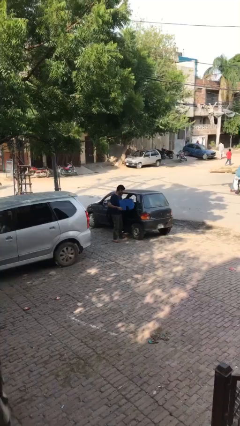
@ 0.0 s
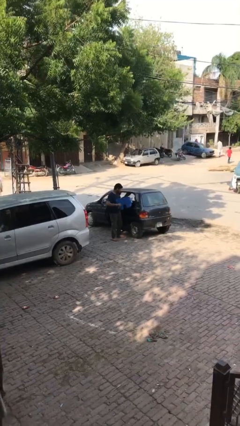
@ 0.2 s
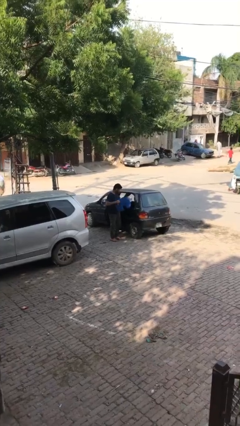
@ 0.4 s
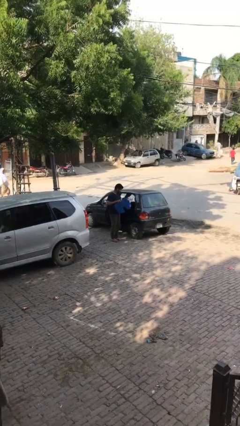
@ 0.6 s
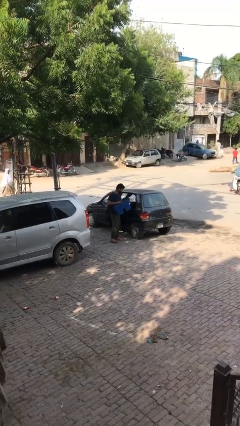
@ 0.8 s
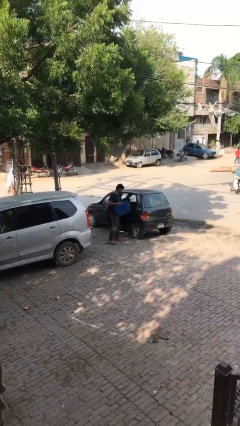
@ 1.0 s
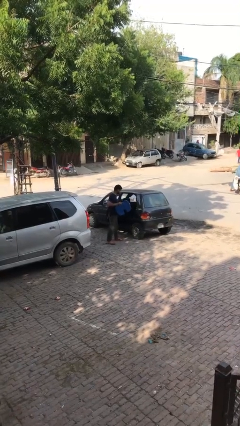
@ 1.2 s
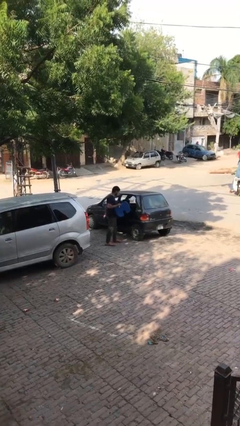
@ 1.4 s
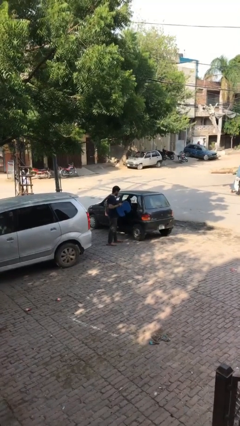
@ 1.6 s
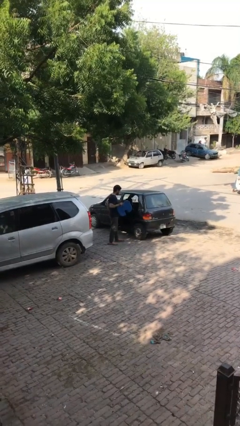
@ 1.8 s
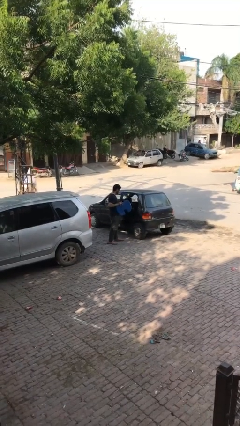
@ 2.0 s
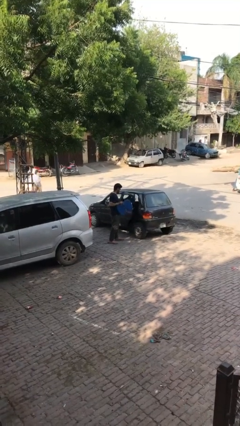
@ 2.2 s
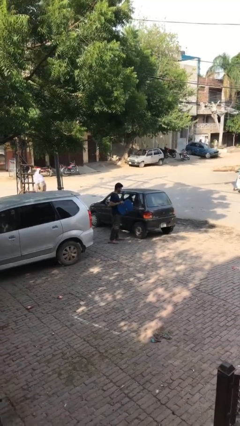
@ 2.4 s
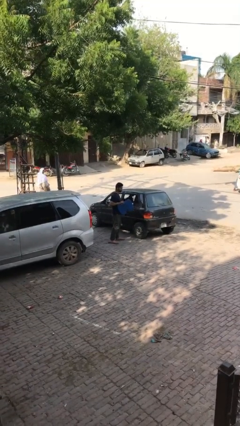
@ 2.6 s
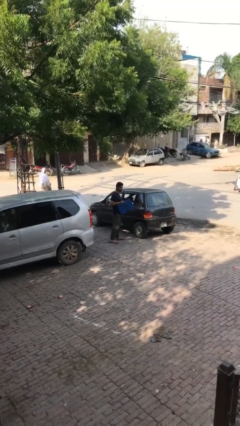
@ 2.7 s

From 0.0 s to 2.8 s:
person closes car door

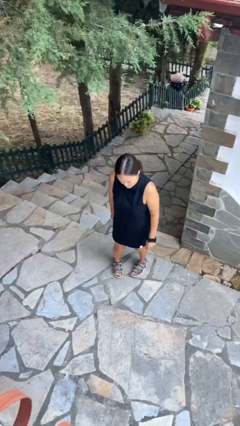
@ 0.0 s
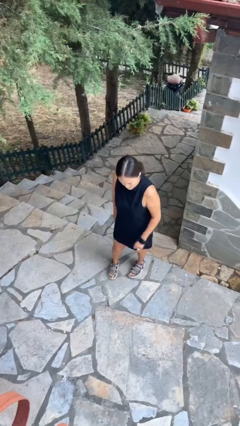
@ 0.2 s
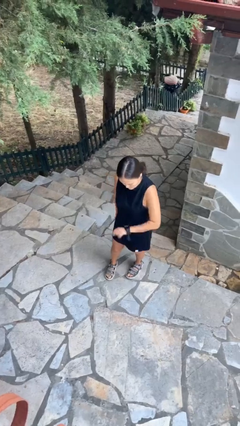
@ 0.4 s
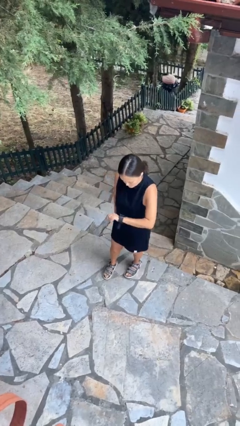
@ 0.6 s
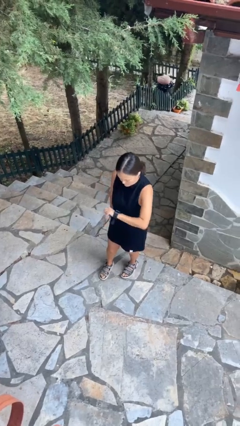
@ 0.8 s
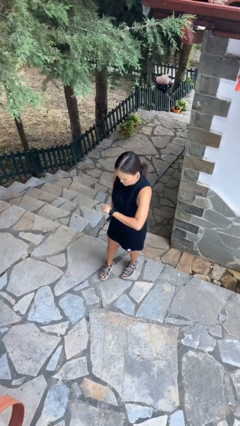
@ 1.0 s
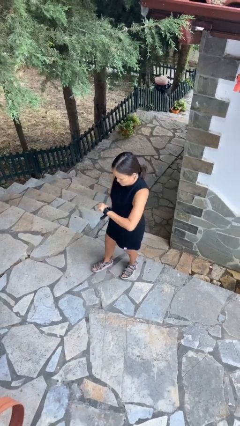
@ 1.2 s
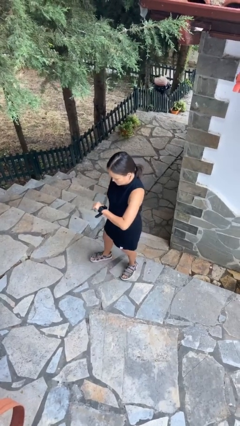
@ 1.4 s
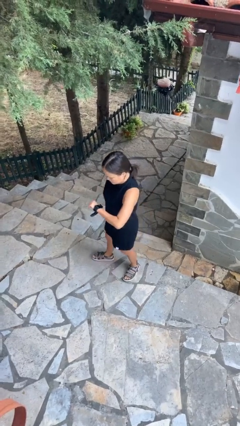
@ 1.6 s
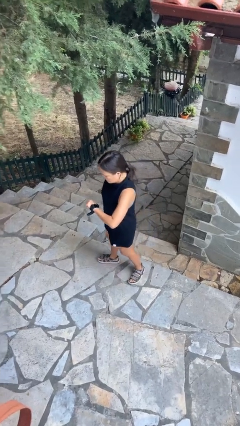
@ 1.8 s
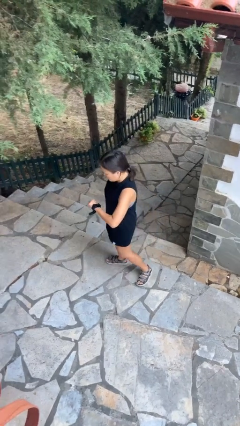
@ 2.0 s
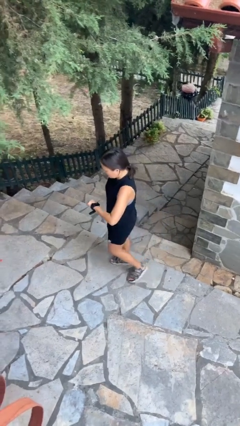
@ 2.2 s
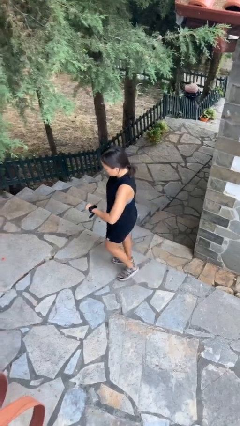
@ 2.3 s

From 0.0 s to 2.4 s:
person looks at wristwatch

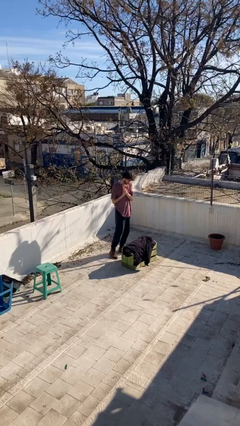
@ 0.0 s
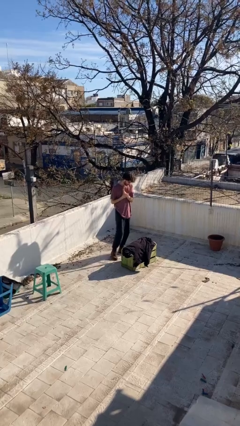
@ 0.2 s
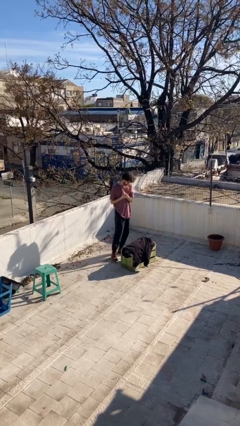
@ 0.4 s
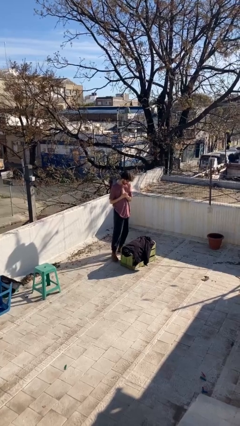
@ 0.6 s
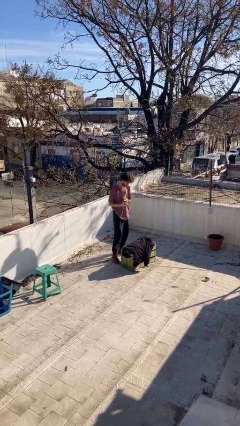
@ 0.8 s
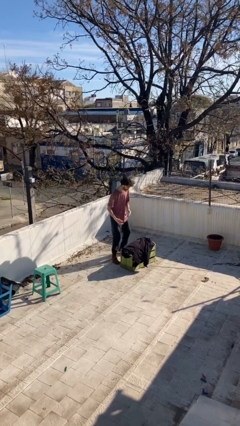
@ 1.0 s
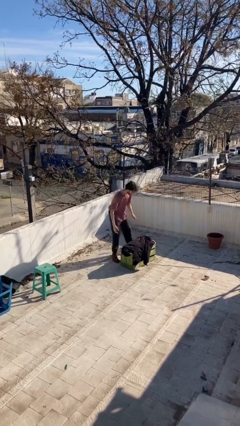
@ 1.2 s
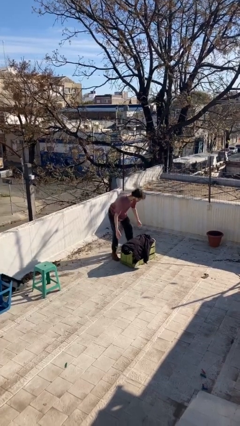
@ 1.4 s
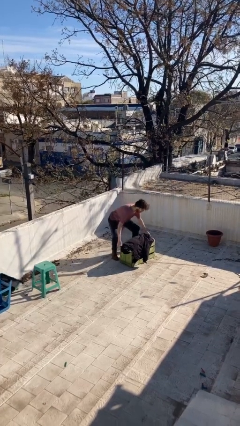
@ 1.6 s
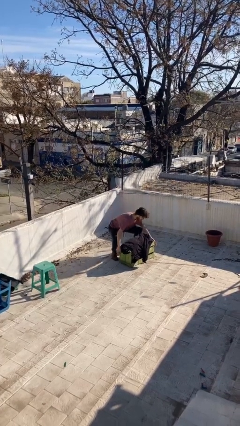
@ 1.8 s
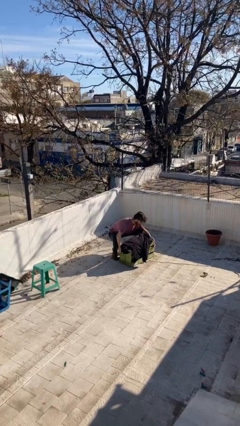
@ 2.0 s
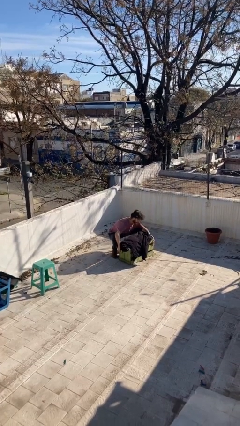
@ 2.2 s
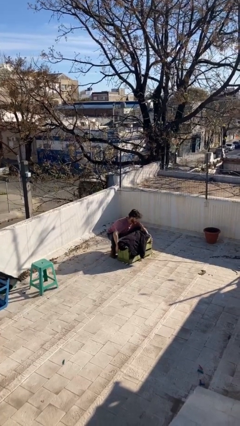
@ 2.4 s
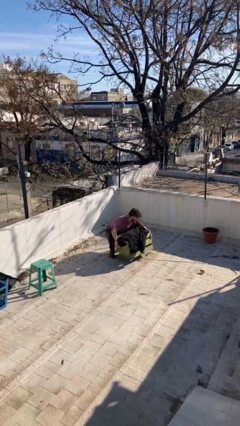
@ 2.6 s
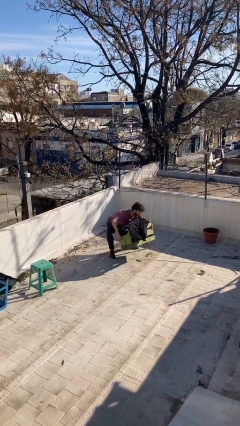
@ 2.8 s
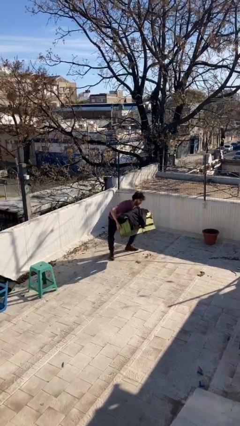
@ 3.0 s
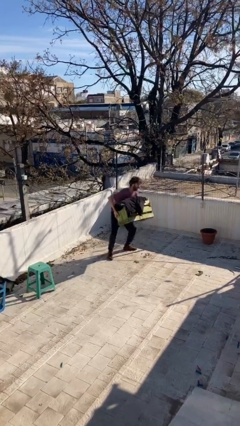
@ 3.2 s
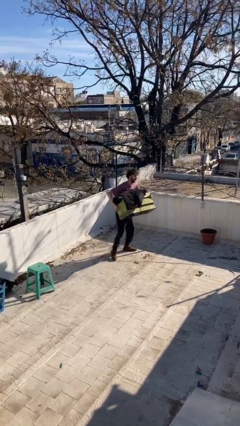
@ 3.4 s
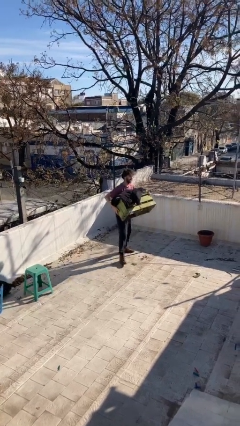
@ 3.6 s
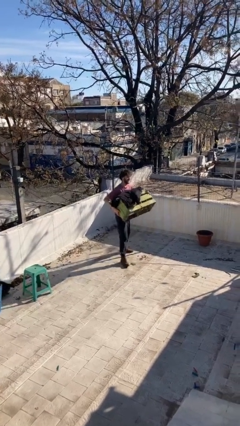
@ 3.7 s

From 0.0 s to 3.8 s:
person picks up object from floor

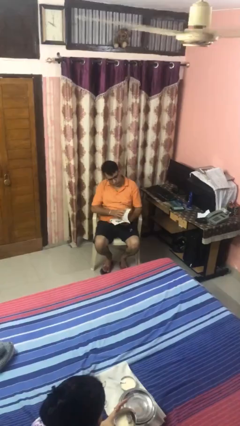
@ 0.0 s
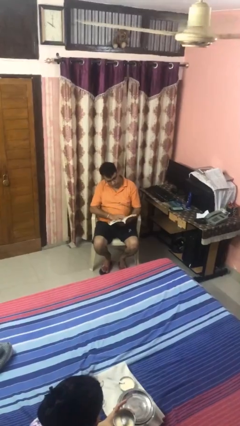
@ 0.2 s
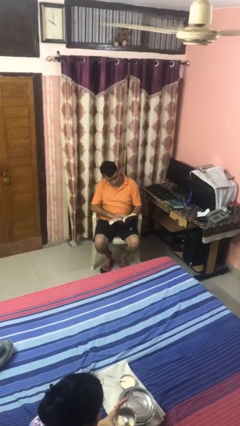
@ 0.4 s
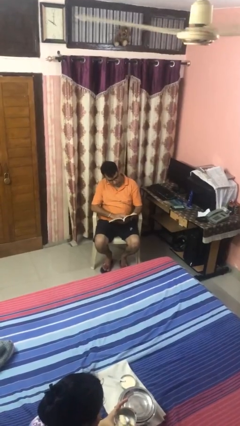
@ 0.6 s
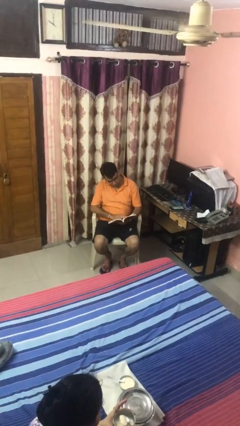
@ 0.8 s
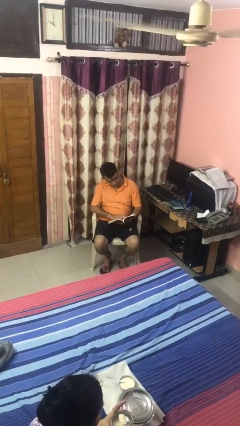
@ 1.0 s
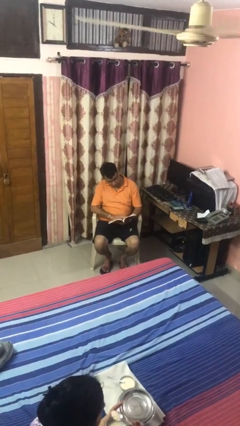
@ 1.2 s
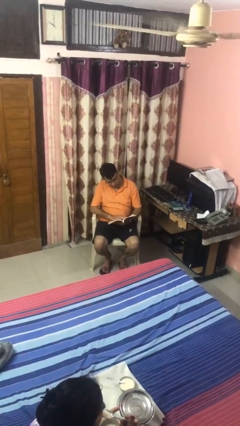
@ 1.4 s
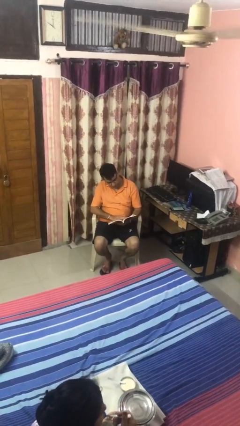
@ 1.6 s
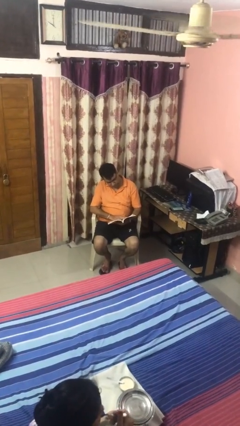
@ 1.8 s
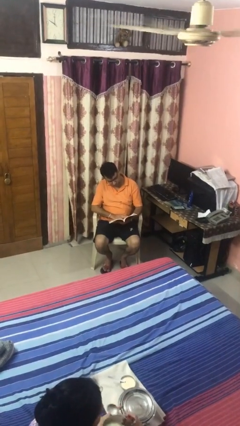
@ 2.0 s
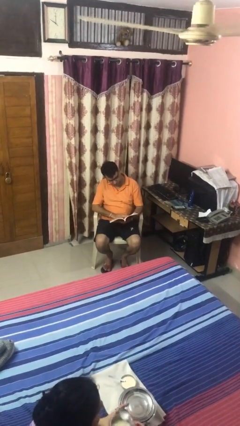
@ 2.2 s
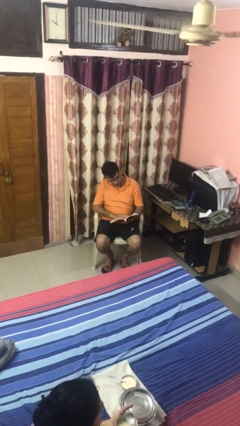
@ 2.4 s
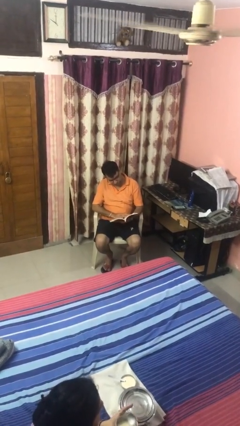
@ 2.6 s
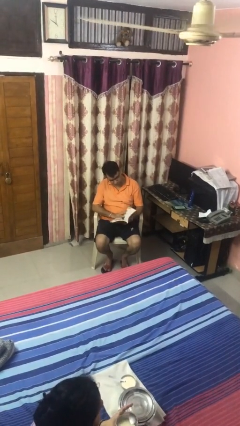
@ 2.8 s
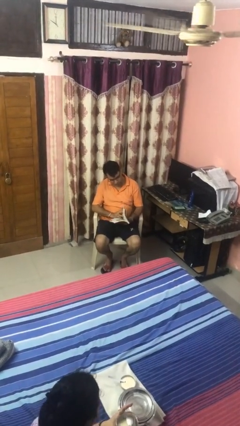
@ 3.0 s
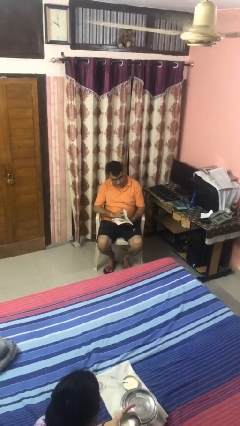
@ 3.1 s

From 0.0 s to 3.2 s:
person reads book

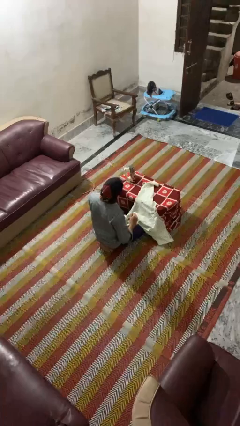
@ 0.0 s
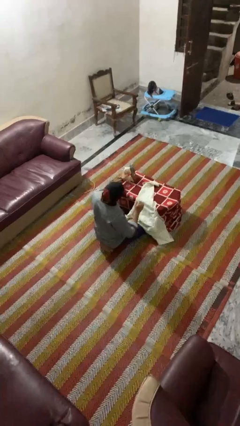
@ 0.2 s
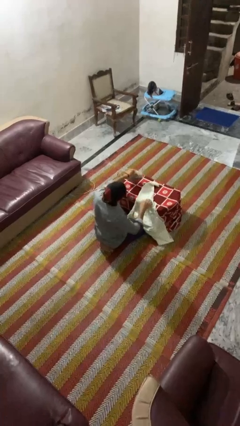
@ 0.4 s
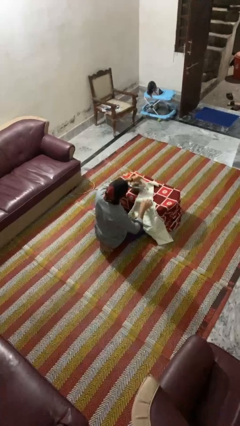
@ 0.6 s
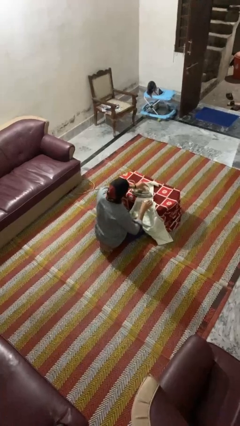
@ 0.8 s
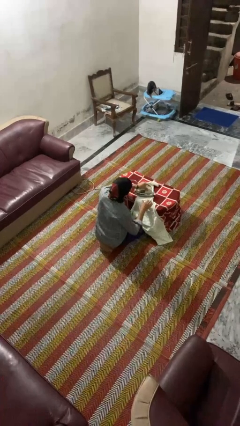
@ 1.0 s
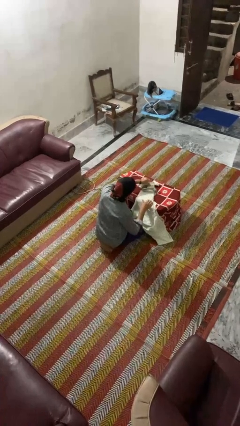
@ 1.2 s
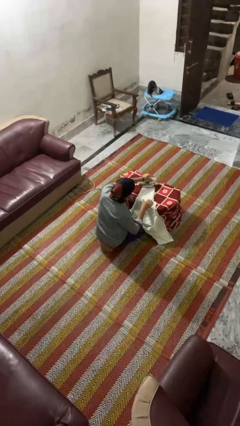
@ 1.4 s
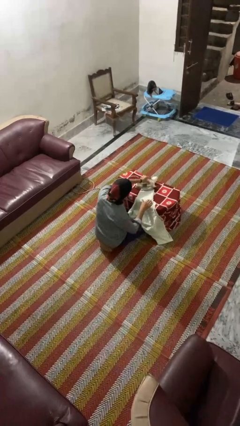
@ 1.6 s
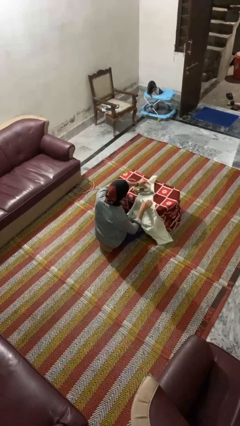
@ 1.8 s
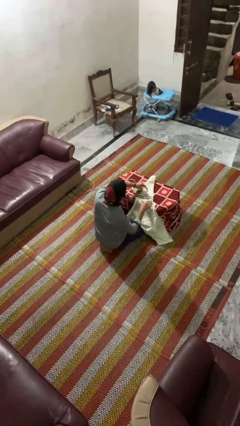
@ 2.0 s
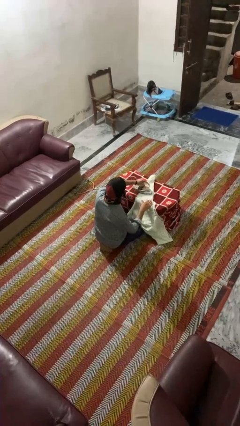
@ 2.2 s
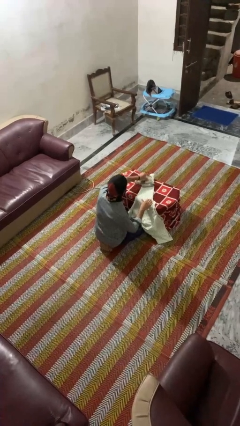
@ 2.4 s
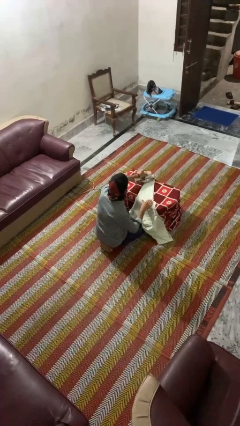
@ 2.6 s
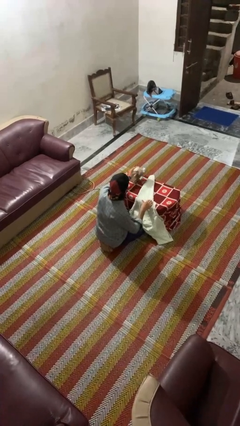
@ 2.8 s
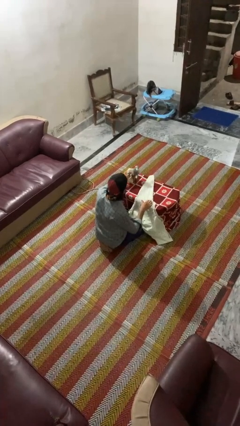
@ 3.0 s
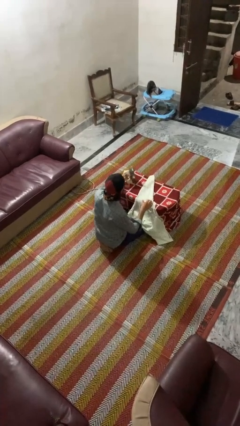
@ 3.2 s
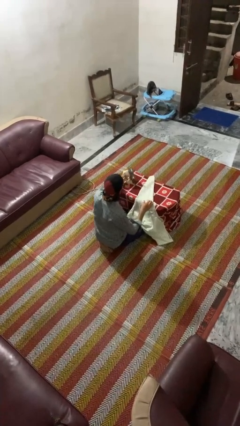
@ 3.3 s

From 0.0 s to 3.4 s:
person irons clothes

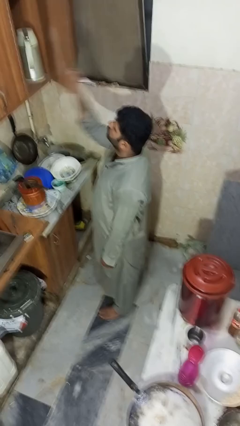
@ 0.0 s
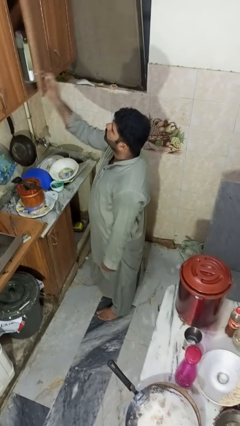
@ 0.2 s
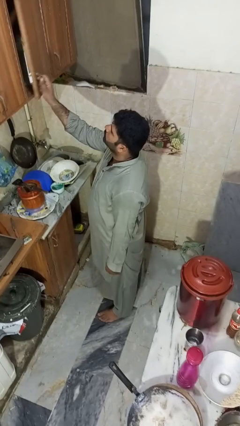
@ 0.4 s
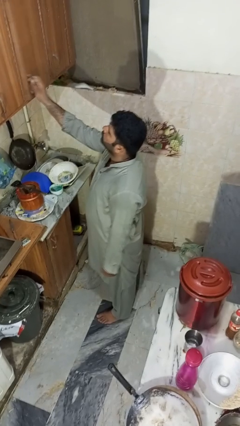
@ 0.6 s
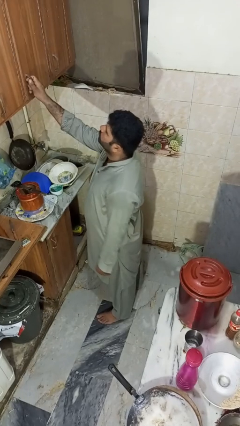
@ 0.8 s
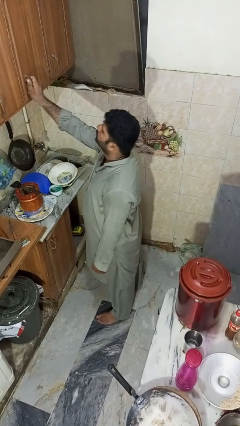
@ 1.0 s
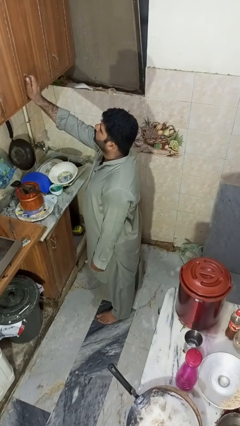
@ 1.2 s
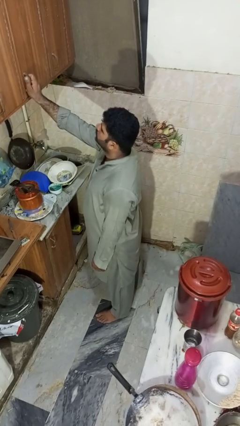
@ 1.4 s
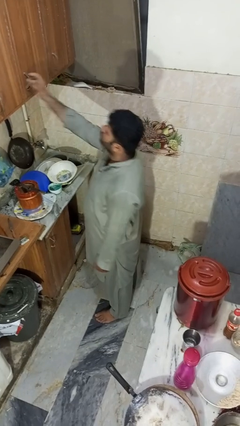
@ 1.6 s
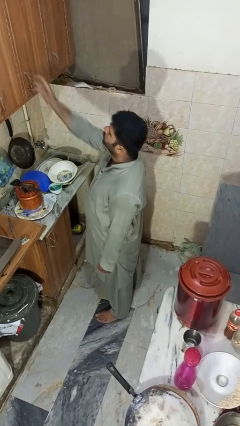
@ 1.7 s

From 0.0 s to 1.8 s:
person closes cabinet
